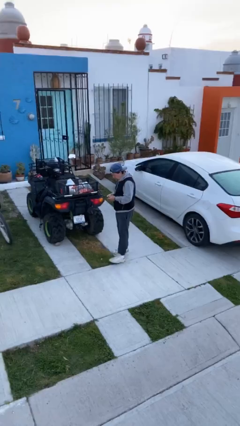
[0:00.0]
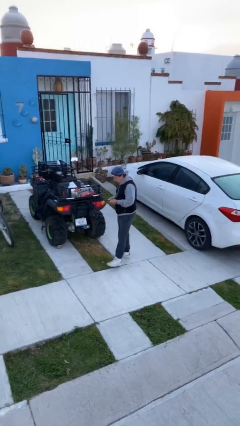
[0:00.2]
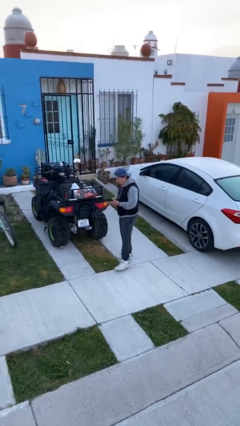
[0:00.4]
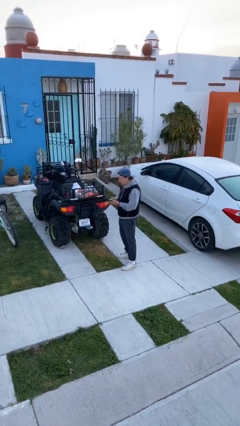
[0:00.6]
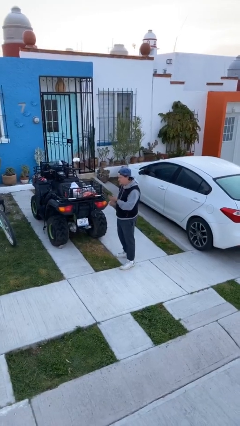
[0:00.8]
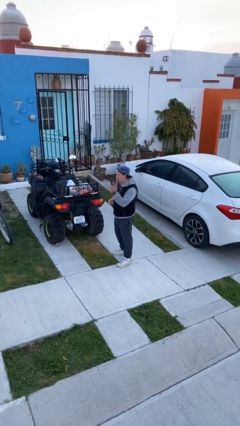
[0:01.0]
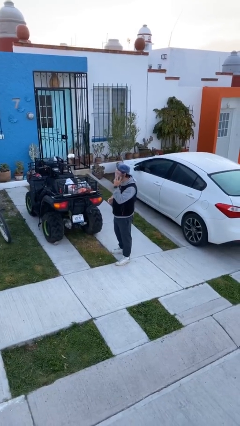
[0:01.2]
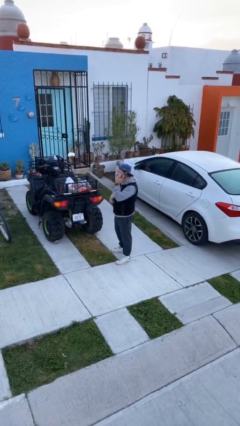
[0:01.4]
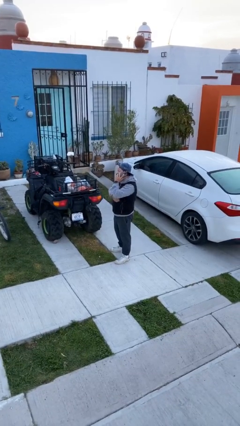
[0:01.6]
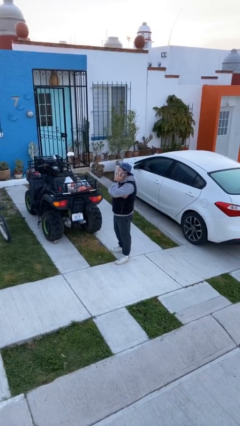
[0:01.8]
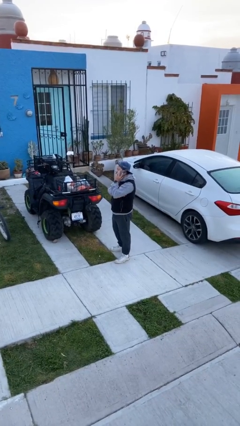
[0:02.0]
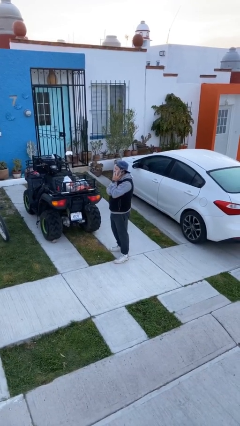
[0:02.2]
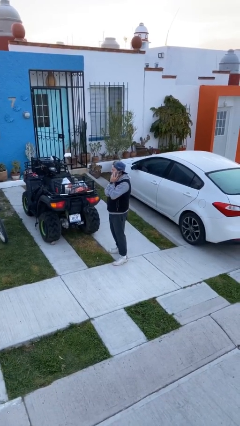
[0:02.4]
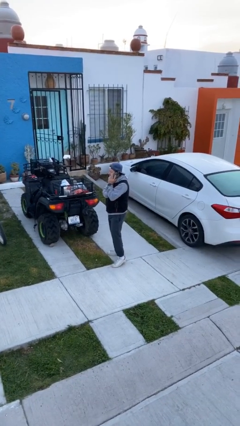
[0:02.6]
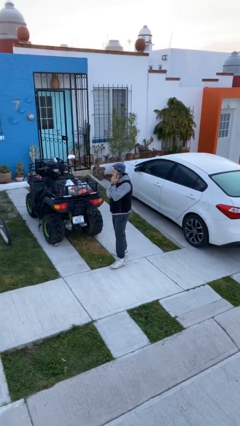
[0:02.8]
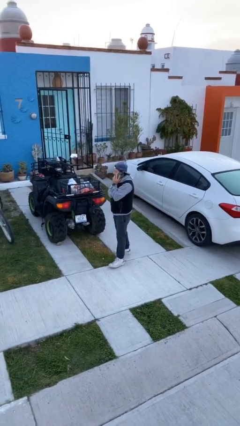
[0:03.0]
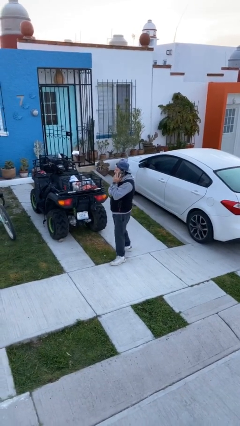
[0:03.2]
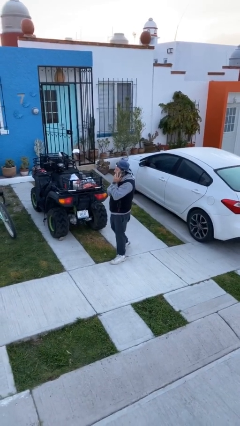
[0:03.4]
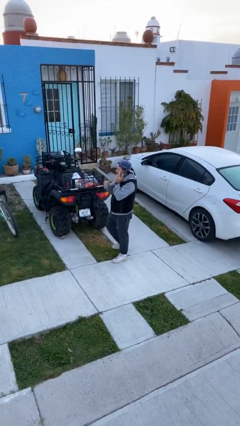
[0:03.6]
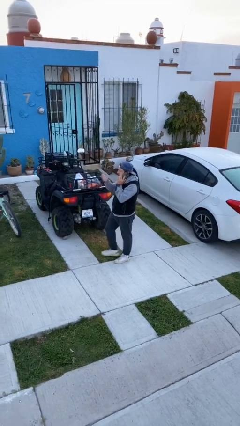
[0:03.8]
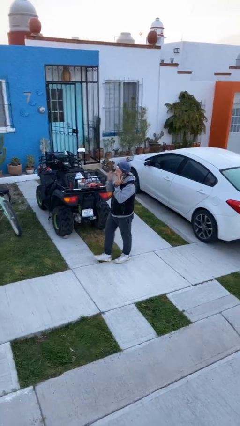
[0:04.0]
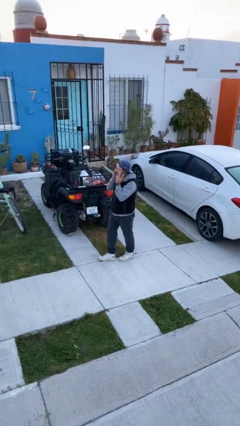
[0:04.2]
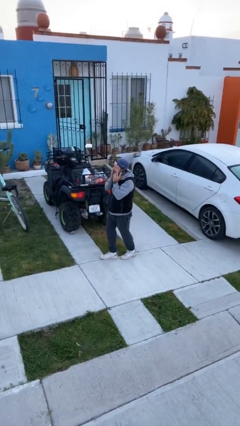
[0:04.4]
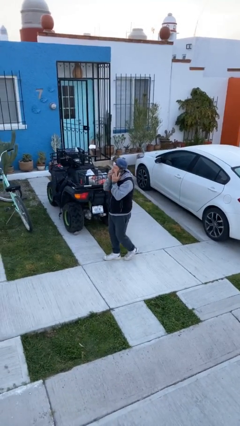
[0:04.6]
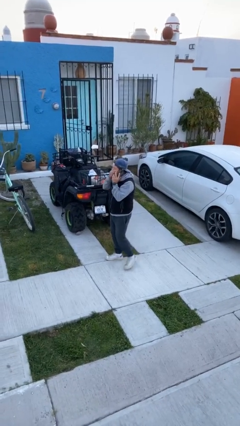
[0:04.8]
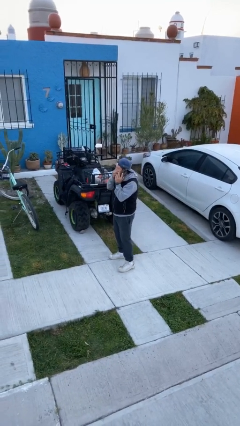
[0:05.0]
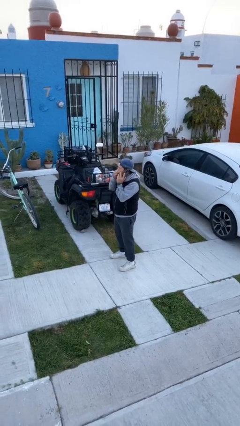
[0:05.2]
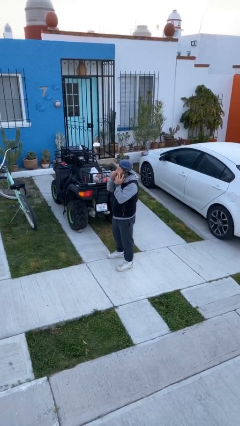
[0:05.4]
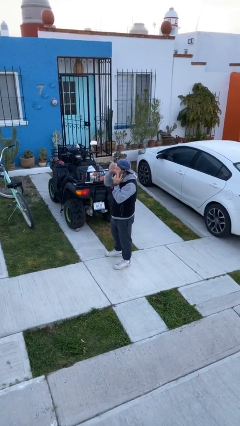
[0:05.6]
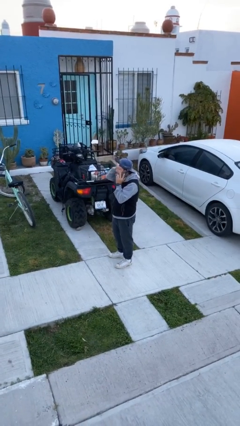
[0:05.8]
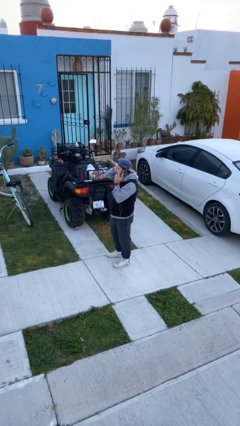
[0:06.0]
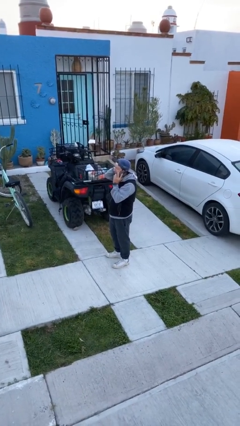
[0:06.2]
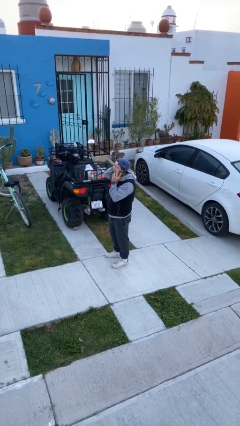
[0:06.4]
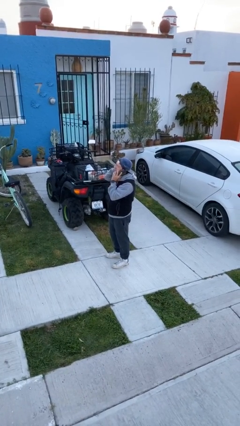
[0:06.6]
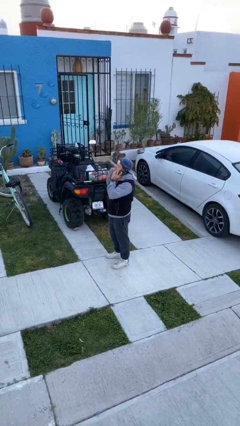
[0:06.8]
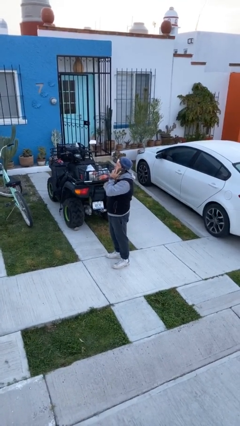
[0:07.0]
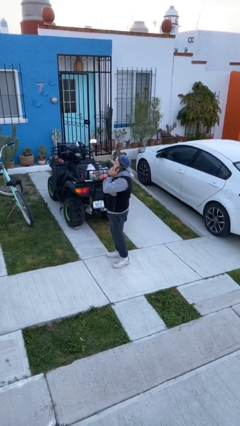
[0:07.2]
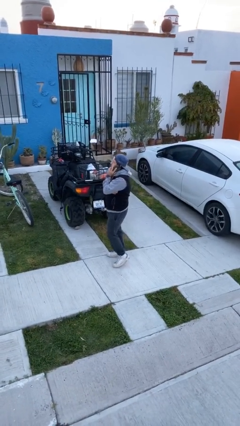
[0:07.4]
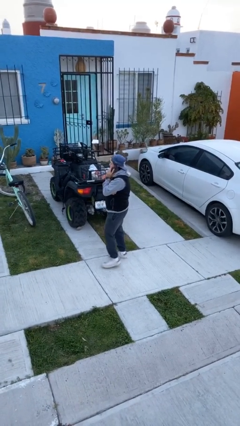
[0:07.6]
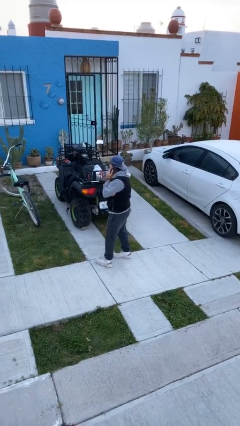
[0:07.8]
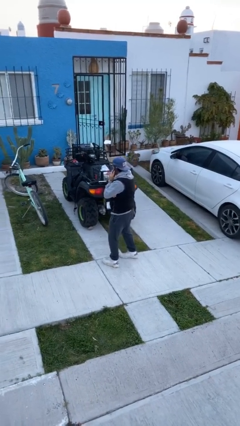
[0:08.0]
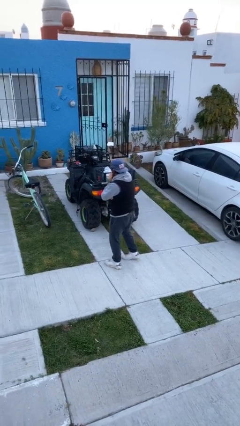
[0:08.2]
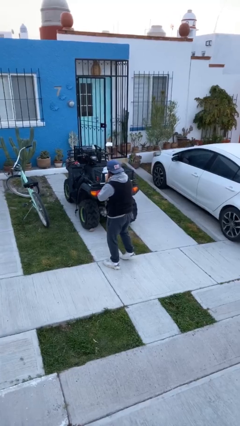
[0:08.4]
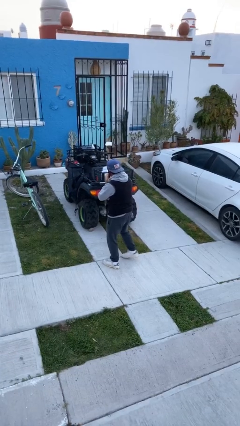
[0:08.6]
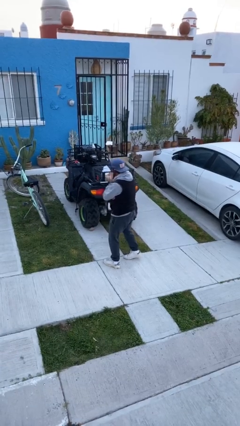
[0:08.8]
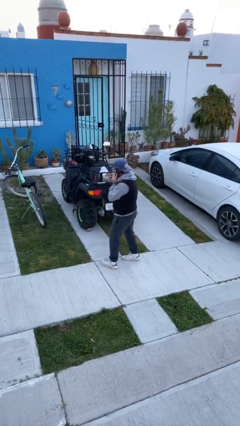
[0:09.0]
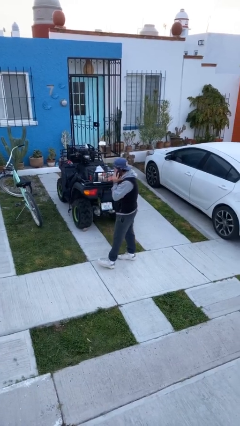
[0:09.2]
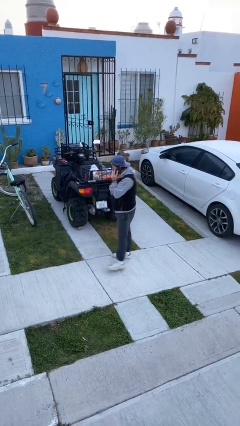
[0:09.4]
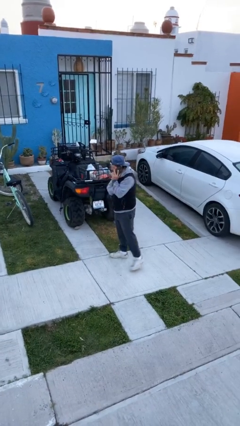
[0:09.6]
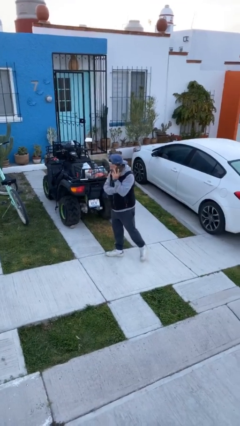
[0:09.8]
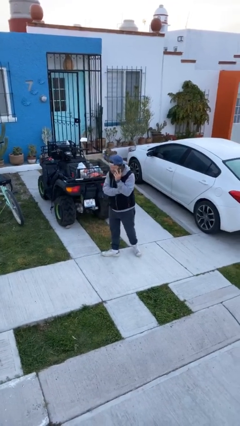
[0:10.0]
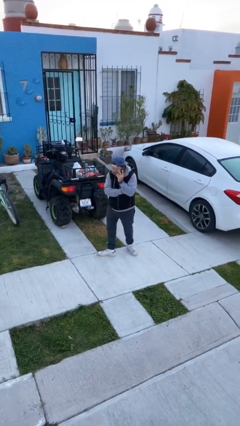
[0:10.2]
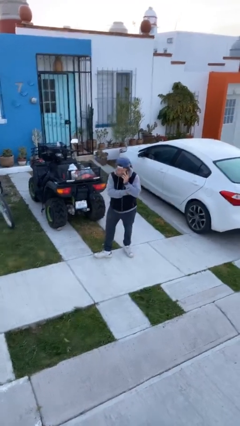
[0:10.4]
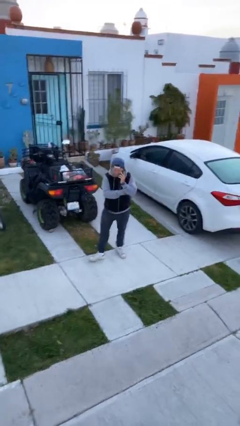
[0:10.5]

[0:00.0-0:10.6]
person talks on phone

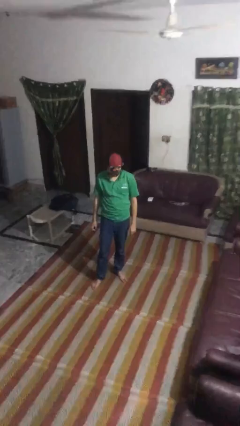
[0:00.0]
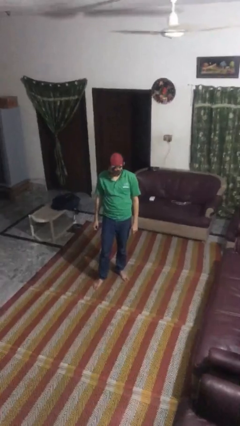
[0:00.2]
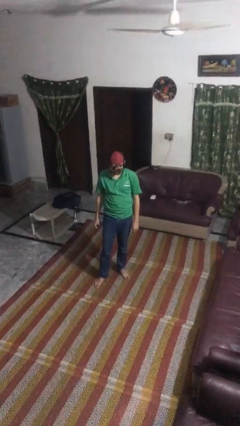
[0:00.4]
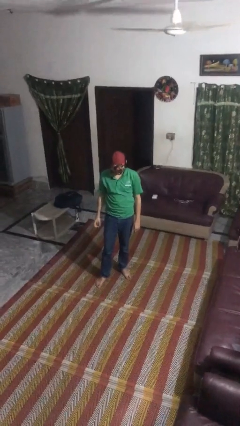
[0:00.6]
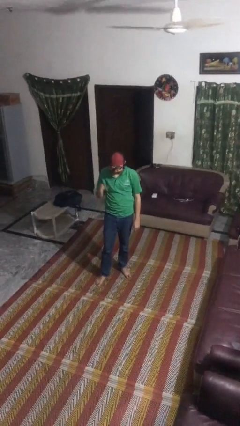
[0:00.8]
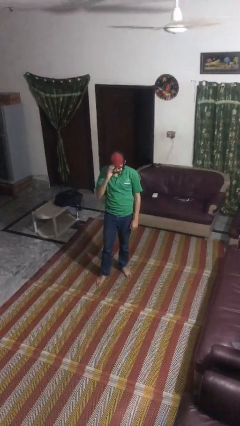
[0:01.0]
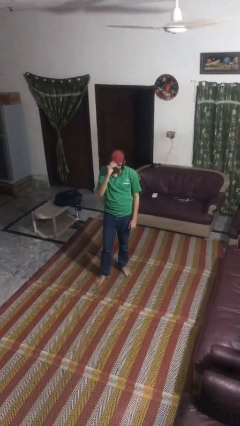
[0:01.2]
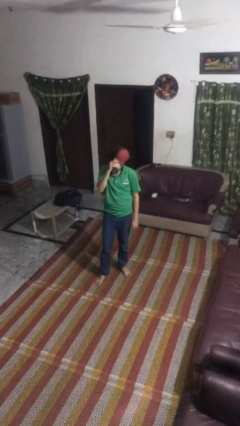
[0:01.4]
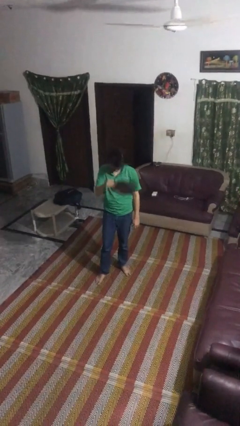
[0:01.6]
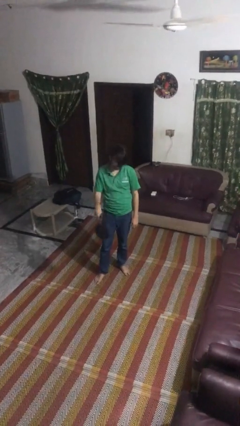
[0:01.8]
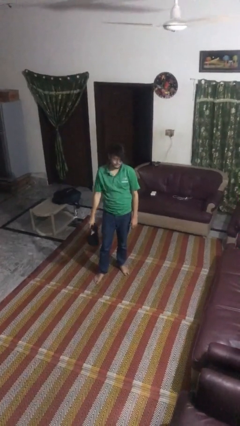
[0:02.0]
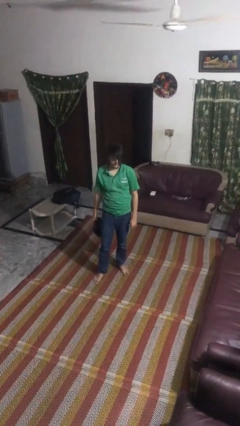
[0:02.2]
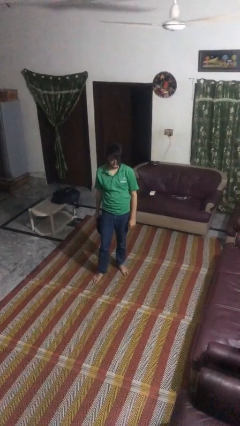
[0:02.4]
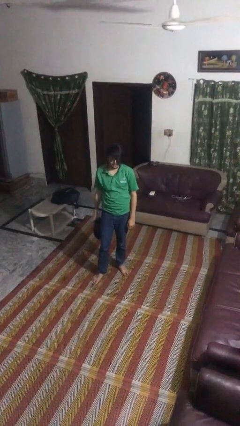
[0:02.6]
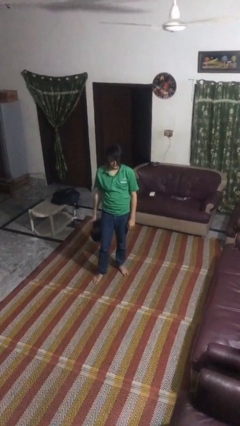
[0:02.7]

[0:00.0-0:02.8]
person takes off hat

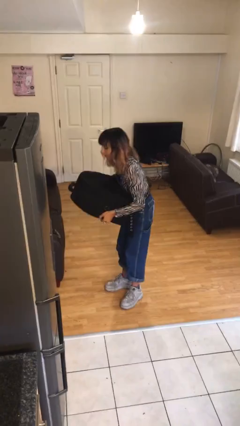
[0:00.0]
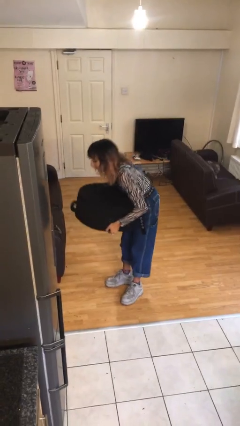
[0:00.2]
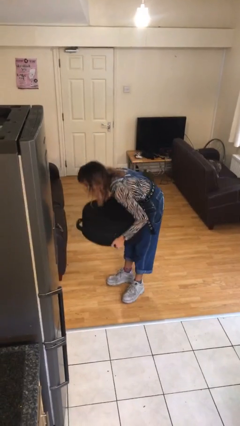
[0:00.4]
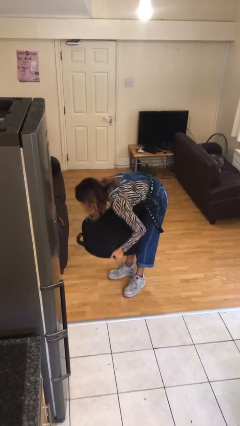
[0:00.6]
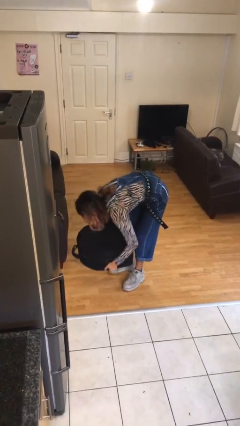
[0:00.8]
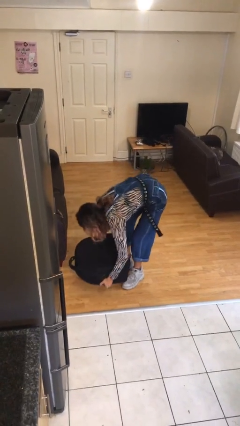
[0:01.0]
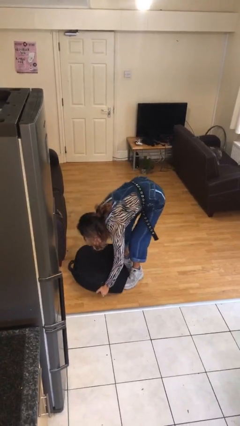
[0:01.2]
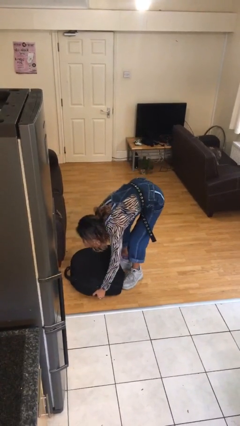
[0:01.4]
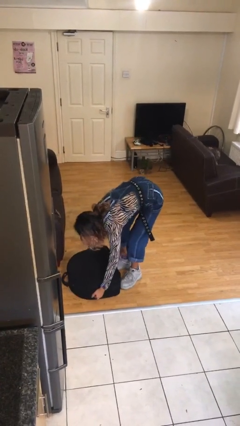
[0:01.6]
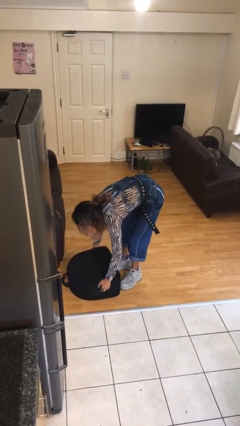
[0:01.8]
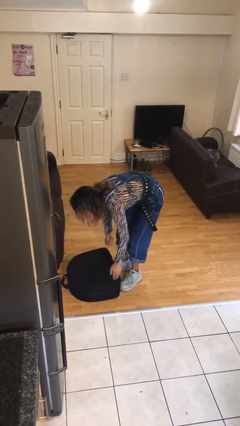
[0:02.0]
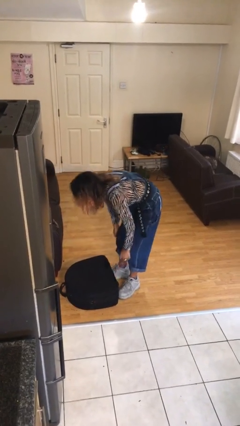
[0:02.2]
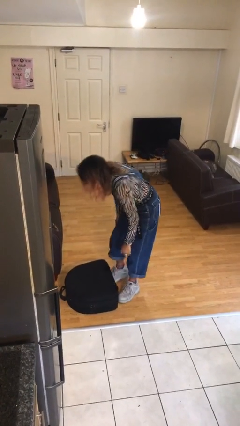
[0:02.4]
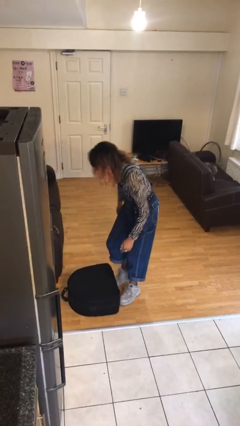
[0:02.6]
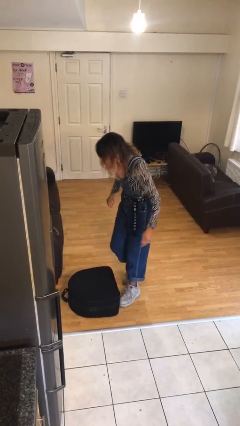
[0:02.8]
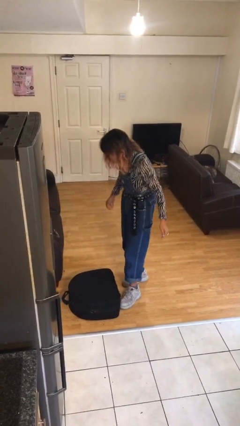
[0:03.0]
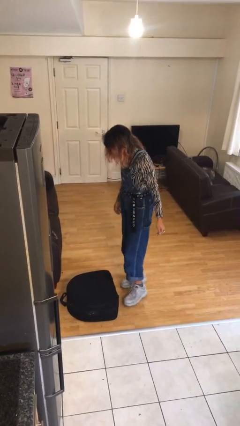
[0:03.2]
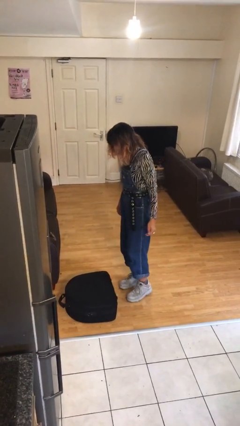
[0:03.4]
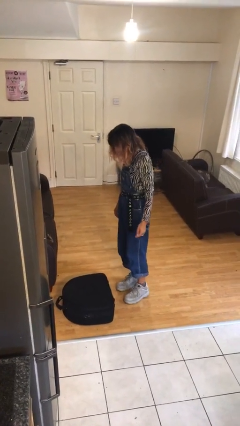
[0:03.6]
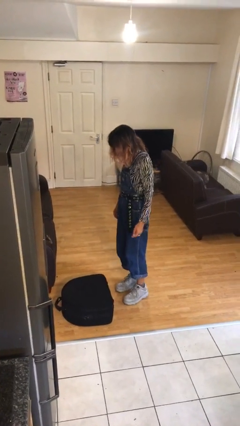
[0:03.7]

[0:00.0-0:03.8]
person puts down object on floor

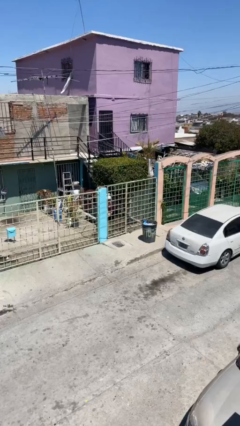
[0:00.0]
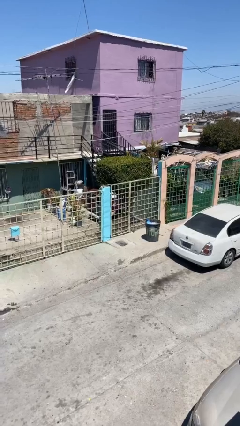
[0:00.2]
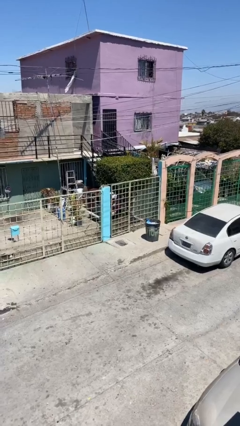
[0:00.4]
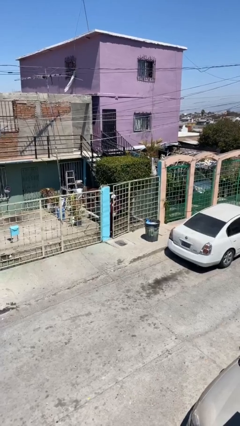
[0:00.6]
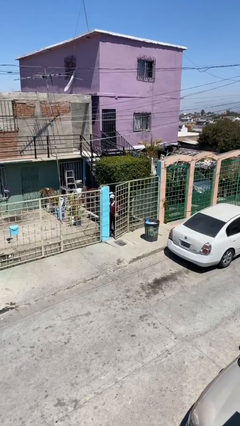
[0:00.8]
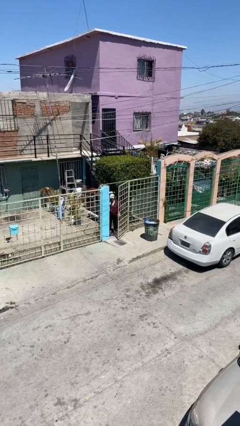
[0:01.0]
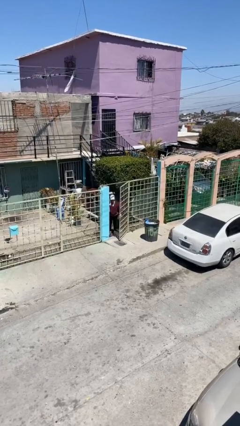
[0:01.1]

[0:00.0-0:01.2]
person opens facility door
